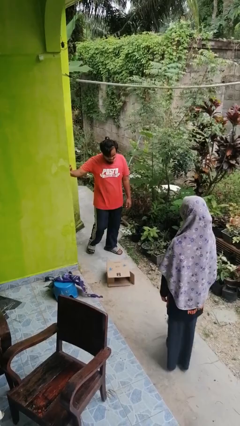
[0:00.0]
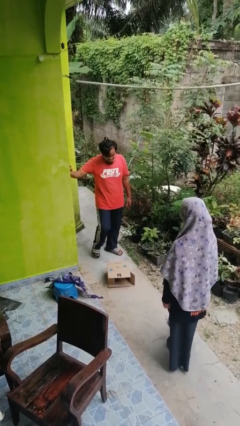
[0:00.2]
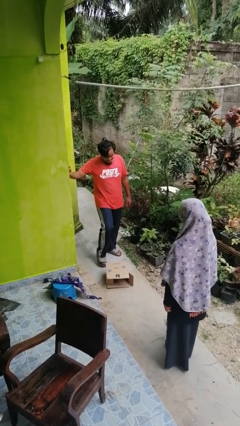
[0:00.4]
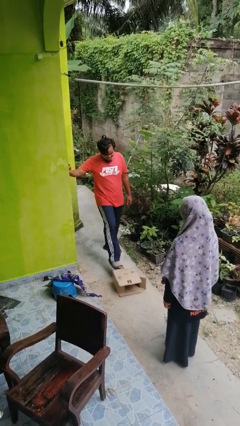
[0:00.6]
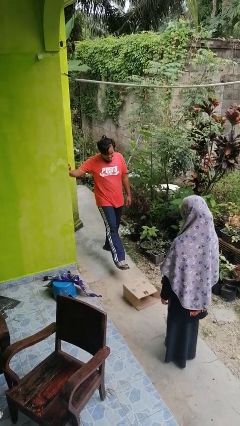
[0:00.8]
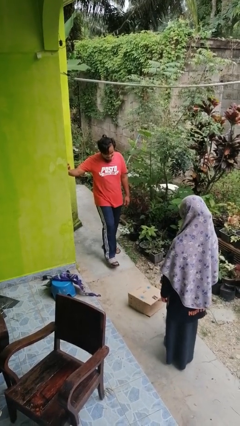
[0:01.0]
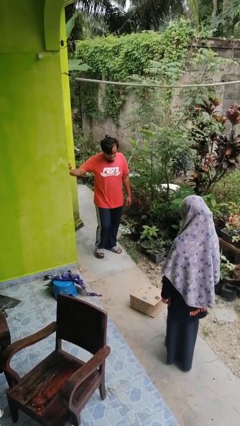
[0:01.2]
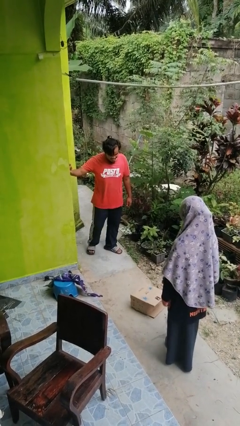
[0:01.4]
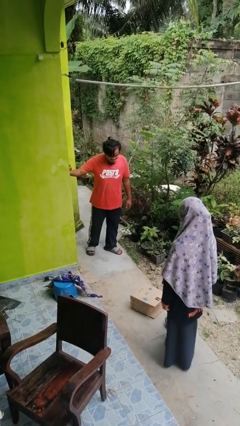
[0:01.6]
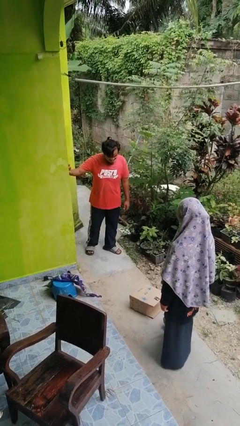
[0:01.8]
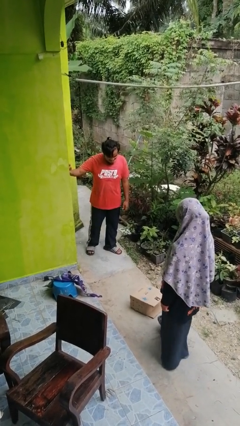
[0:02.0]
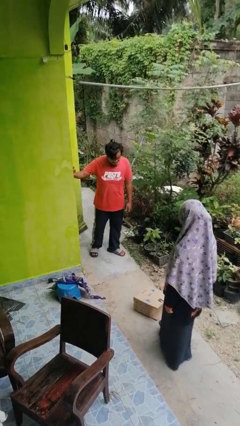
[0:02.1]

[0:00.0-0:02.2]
person kicks object to person

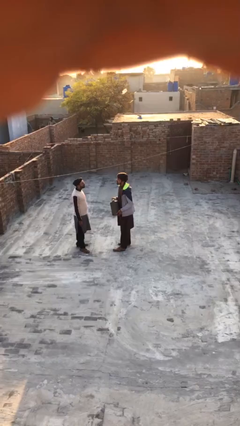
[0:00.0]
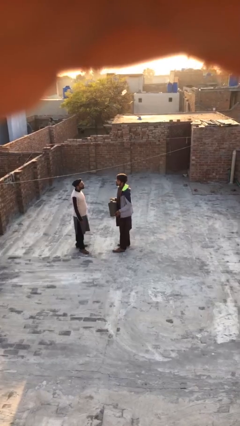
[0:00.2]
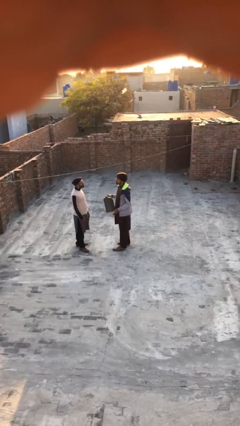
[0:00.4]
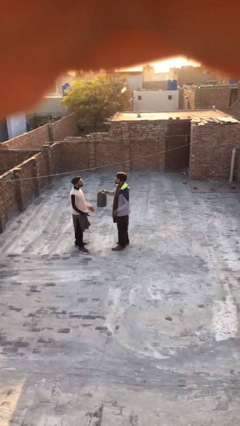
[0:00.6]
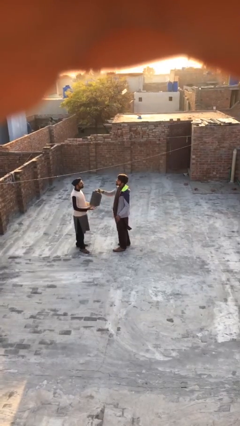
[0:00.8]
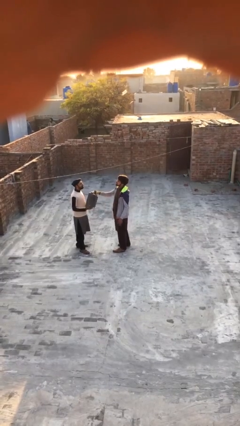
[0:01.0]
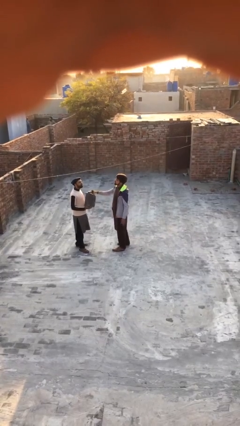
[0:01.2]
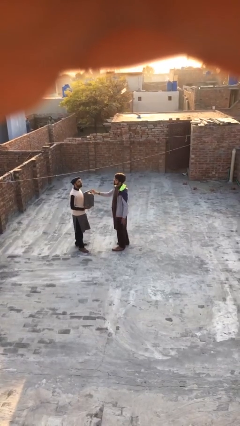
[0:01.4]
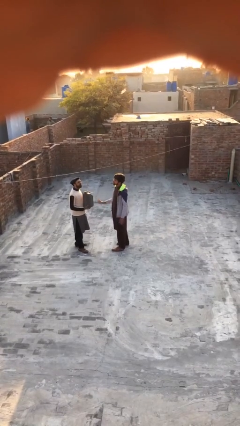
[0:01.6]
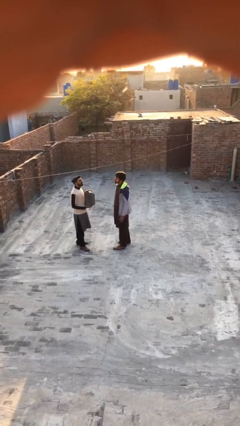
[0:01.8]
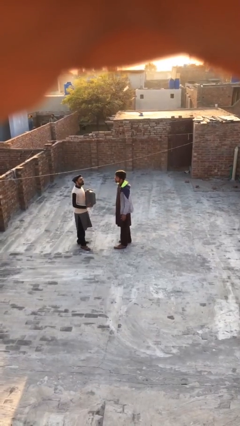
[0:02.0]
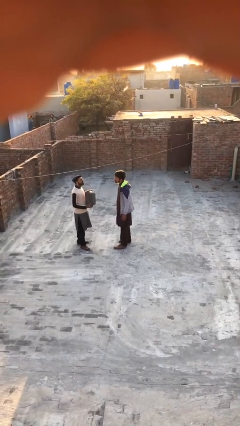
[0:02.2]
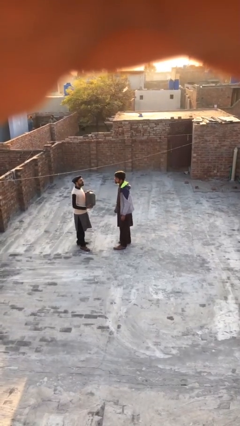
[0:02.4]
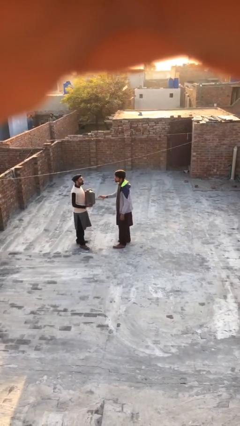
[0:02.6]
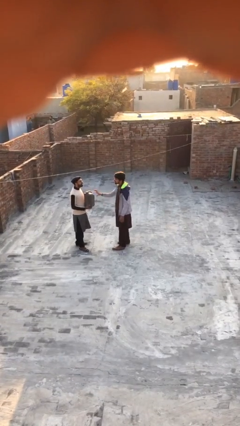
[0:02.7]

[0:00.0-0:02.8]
person transfers object to person

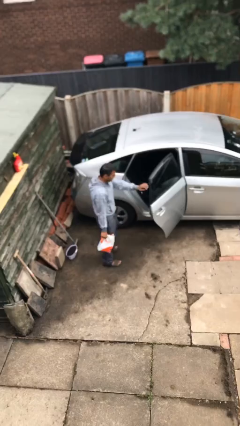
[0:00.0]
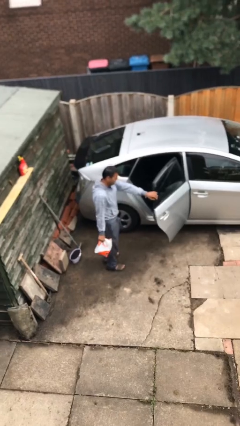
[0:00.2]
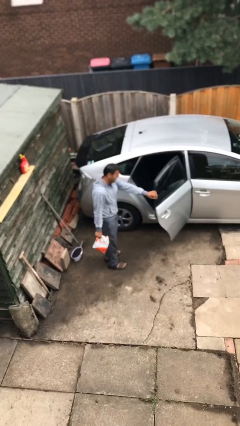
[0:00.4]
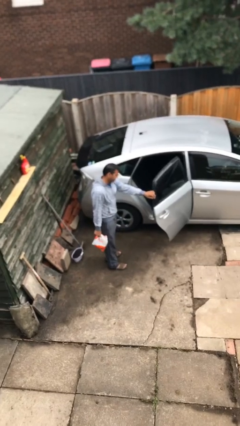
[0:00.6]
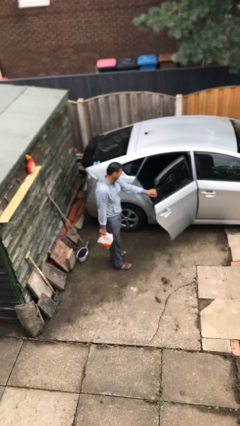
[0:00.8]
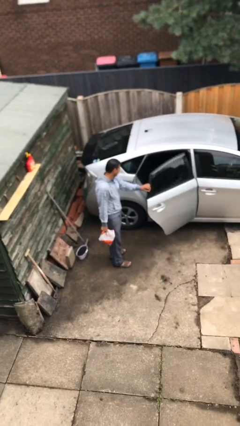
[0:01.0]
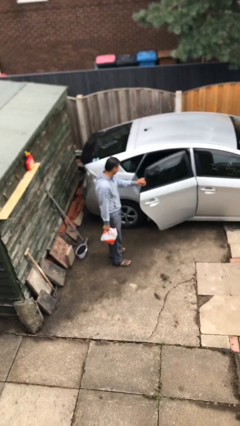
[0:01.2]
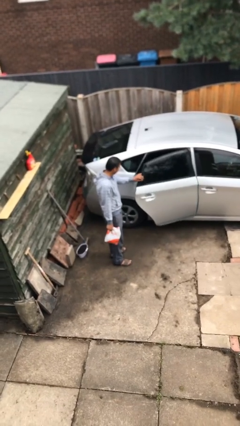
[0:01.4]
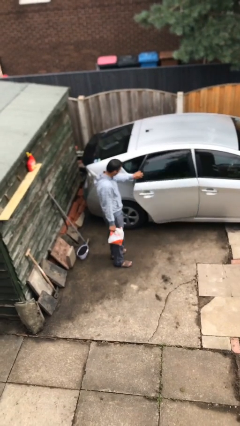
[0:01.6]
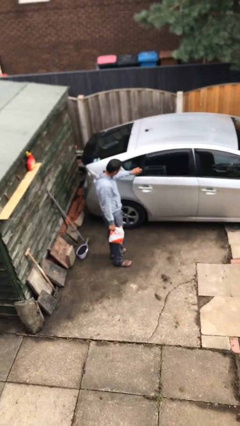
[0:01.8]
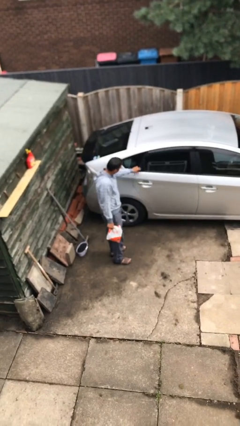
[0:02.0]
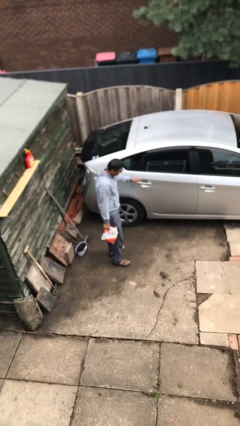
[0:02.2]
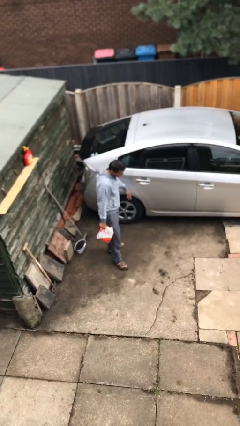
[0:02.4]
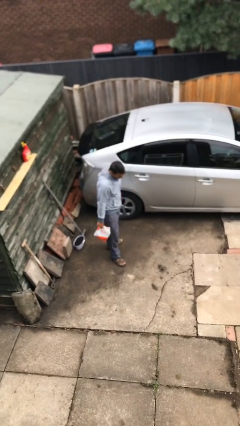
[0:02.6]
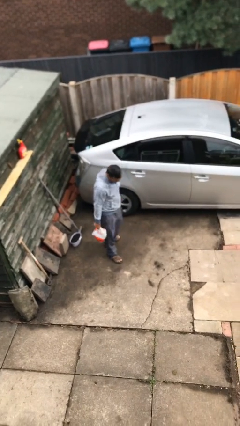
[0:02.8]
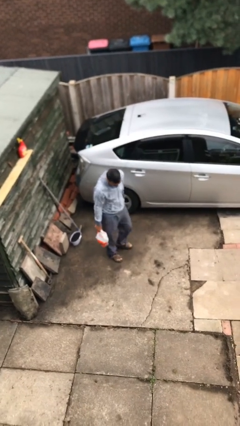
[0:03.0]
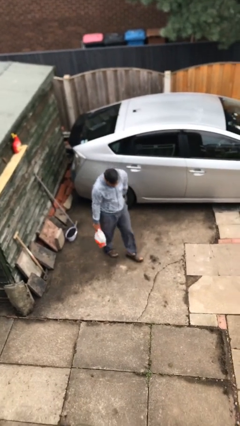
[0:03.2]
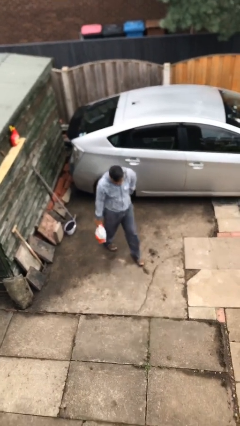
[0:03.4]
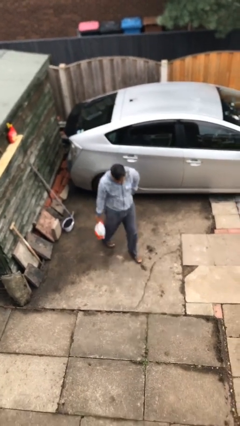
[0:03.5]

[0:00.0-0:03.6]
person closes car door

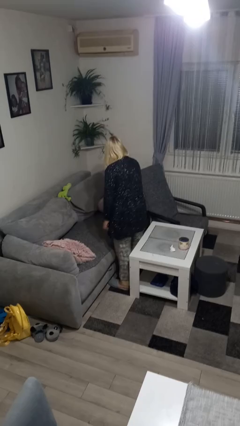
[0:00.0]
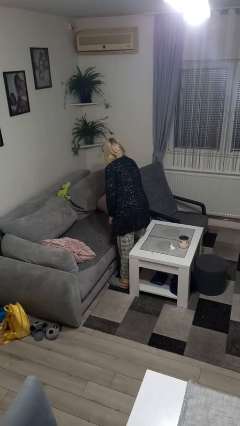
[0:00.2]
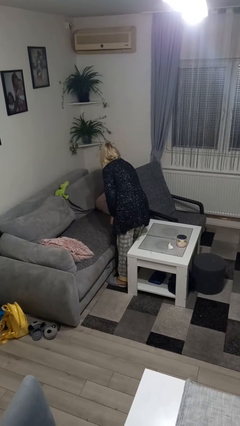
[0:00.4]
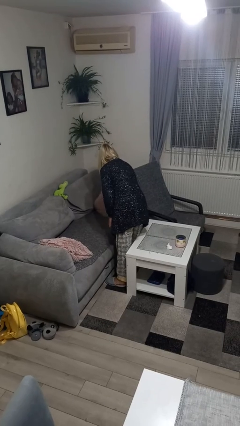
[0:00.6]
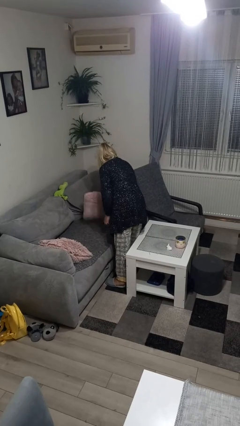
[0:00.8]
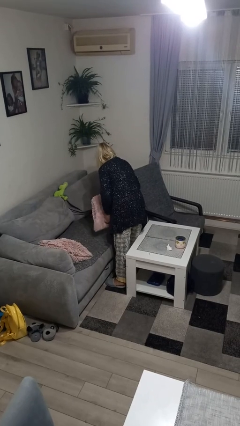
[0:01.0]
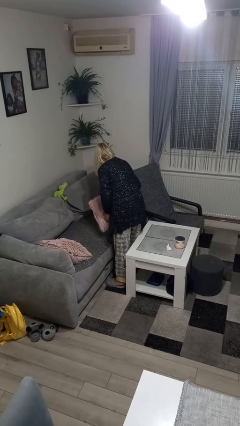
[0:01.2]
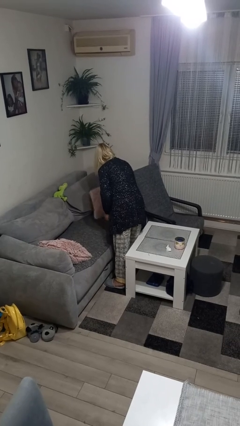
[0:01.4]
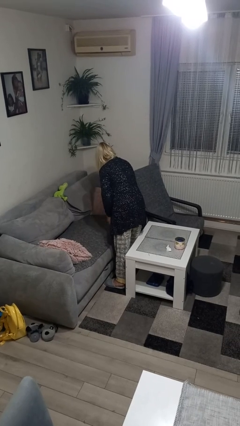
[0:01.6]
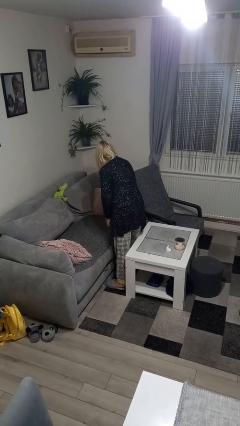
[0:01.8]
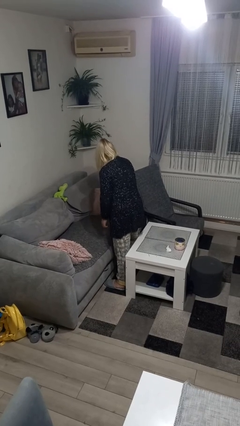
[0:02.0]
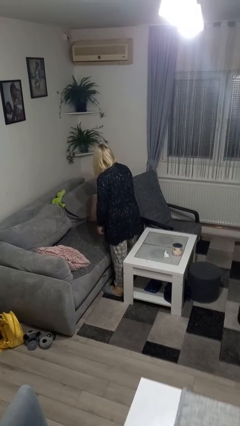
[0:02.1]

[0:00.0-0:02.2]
person searches in couch

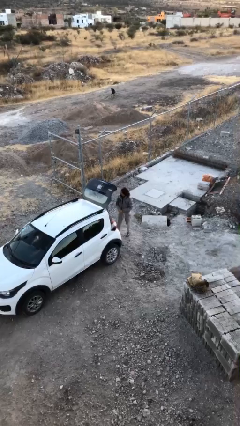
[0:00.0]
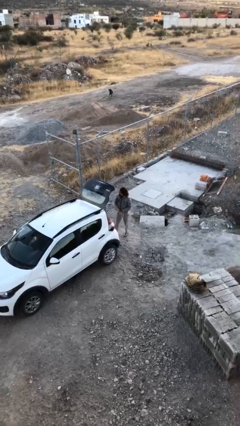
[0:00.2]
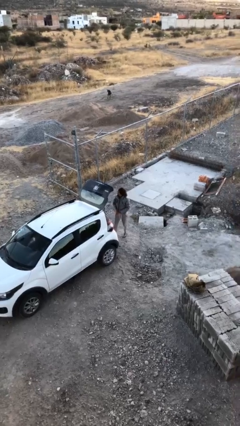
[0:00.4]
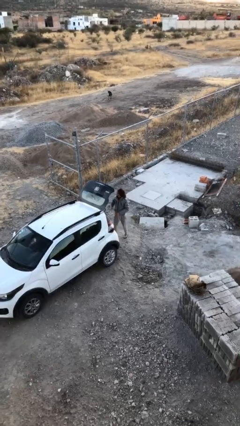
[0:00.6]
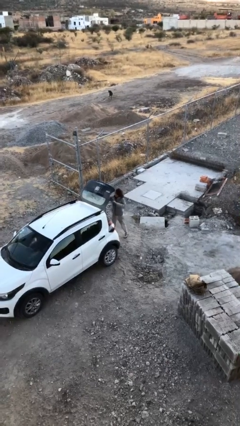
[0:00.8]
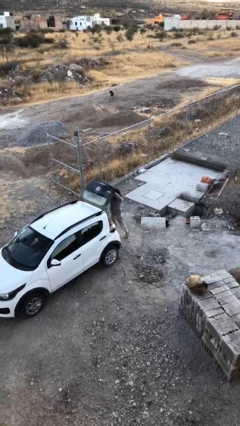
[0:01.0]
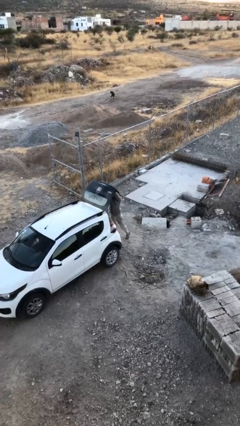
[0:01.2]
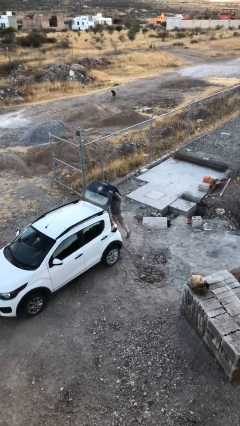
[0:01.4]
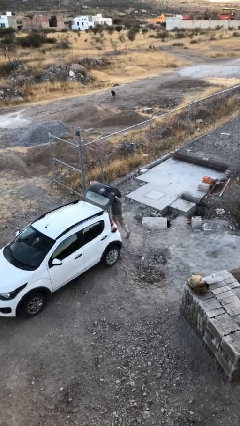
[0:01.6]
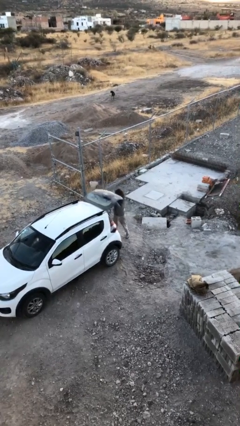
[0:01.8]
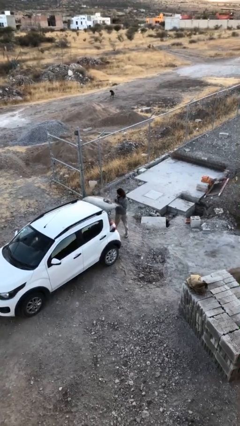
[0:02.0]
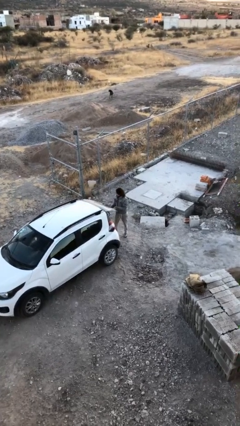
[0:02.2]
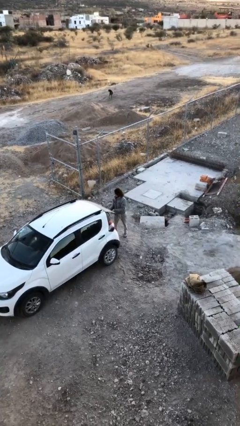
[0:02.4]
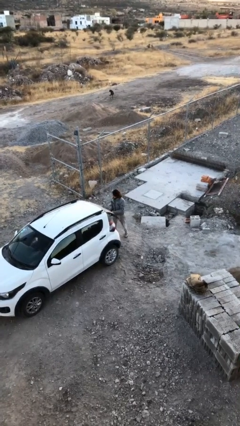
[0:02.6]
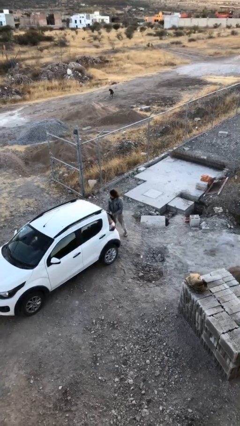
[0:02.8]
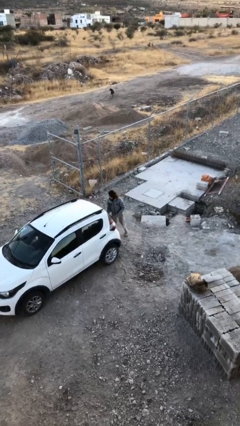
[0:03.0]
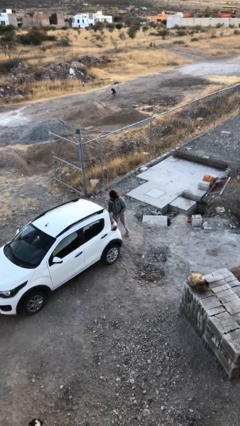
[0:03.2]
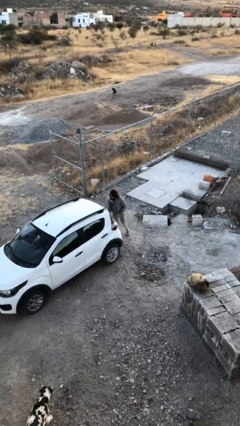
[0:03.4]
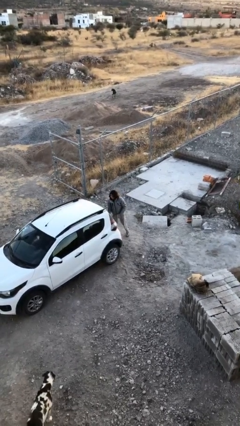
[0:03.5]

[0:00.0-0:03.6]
person closes car trunk

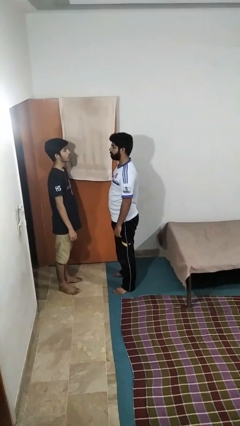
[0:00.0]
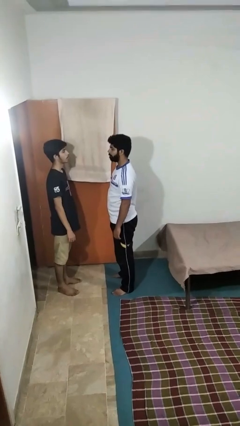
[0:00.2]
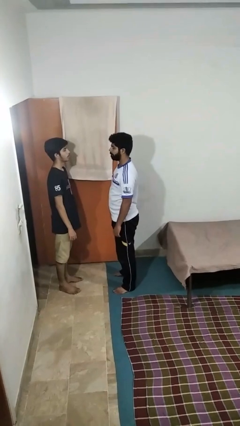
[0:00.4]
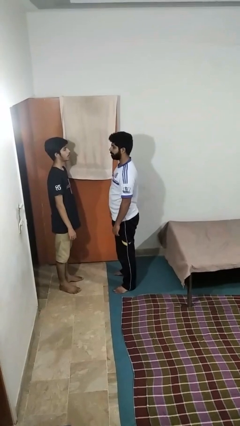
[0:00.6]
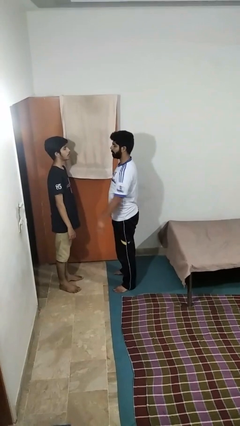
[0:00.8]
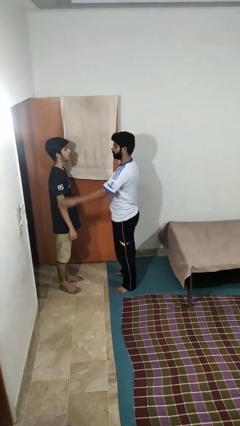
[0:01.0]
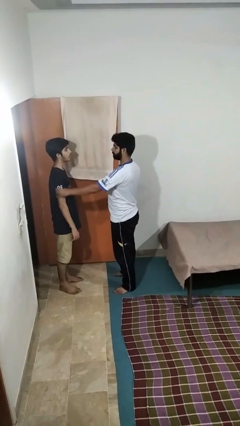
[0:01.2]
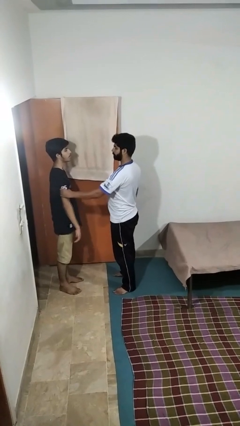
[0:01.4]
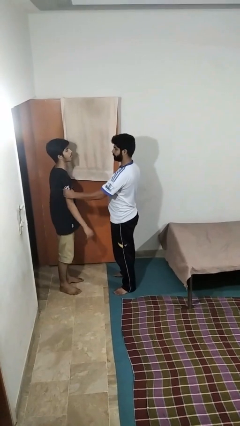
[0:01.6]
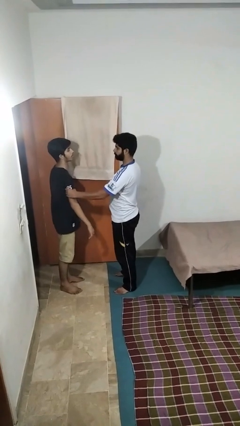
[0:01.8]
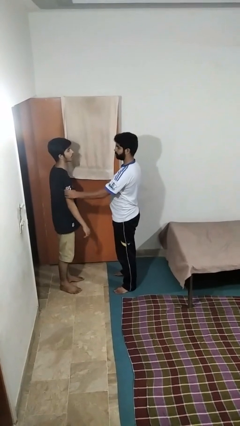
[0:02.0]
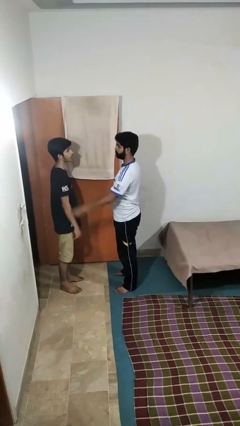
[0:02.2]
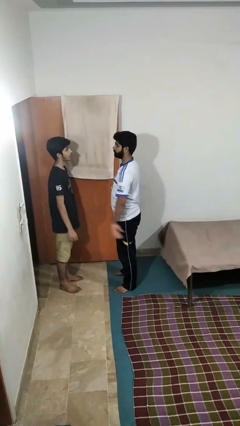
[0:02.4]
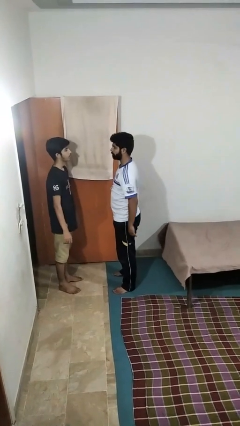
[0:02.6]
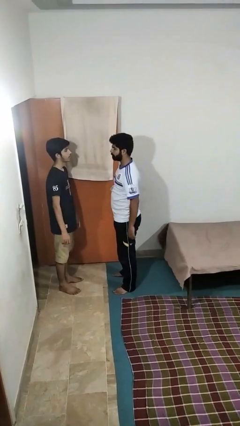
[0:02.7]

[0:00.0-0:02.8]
person grabs person by bicep

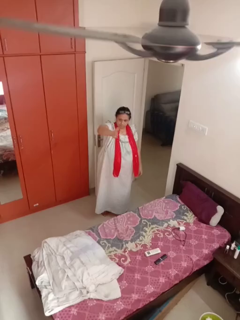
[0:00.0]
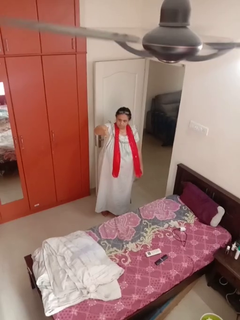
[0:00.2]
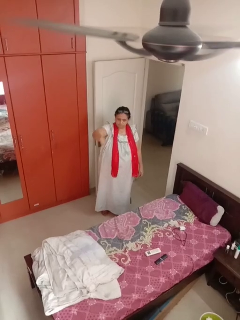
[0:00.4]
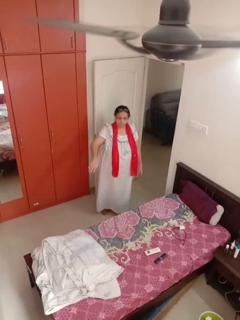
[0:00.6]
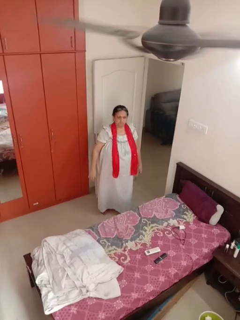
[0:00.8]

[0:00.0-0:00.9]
person gestures swipe right
